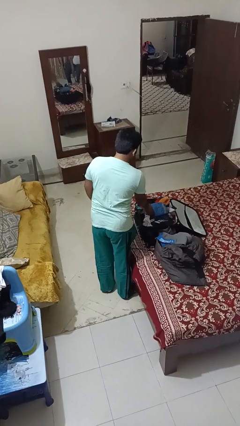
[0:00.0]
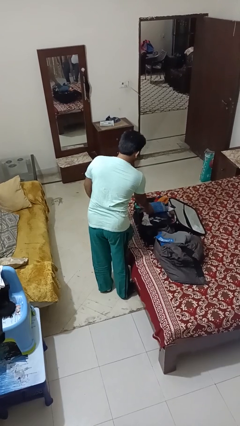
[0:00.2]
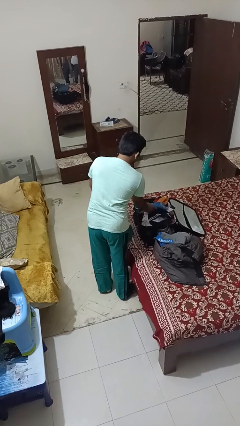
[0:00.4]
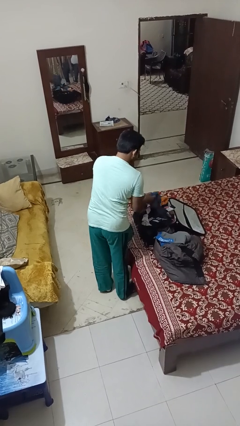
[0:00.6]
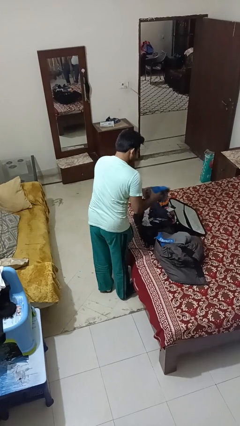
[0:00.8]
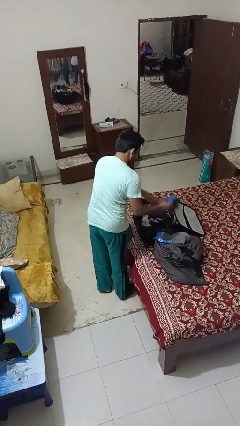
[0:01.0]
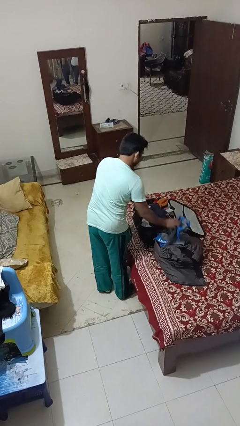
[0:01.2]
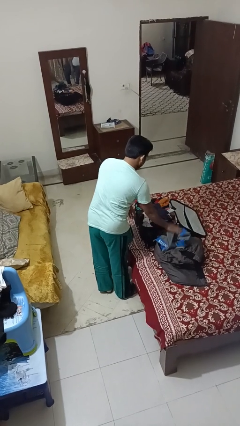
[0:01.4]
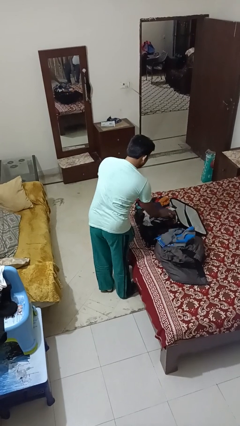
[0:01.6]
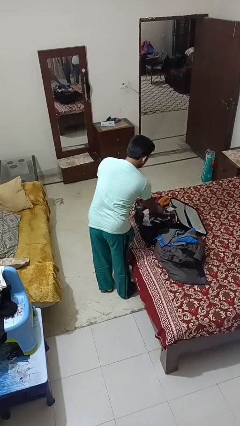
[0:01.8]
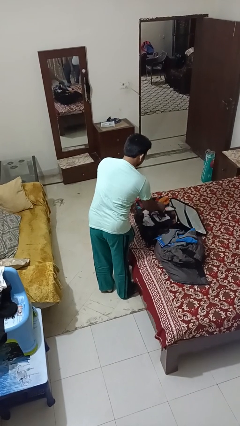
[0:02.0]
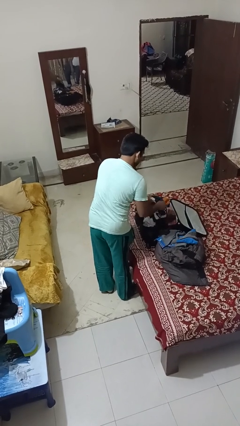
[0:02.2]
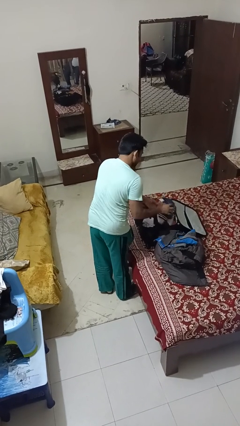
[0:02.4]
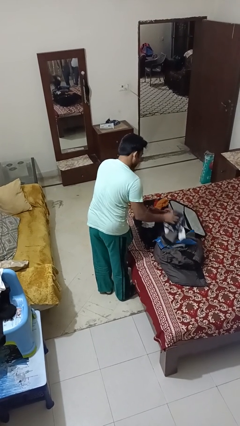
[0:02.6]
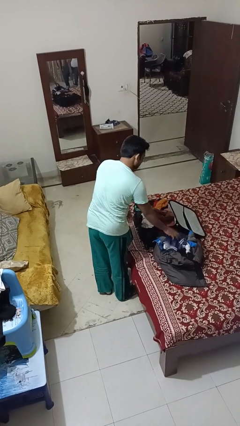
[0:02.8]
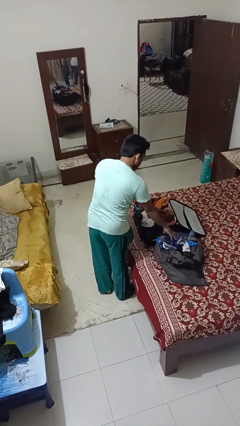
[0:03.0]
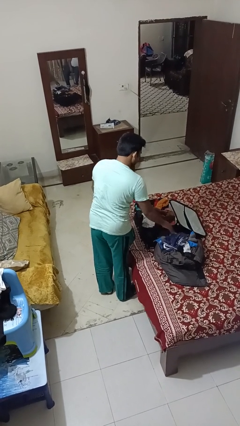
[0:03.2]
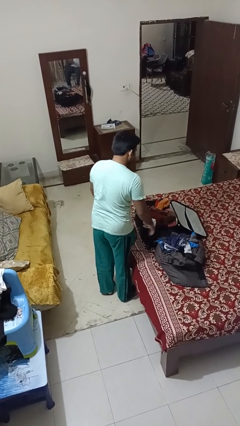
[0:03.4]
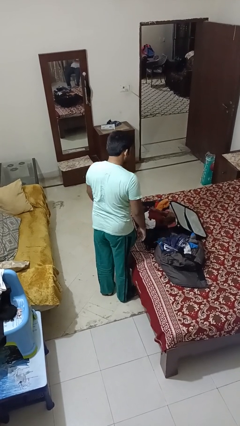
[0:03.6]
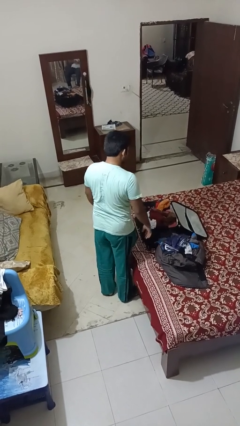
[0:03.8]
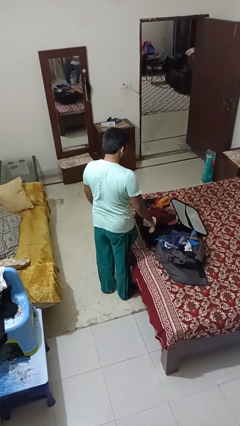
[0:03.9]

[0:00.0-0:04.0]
person unloads clothes from suitcase

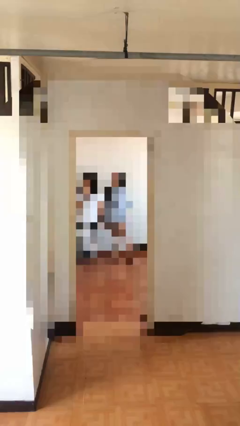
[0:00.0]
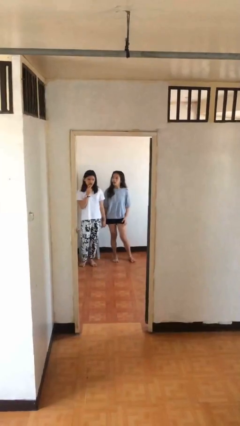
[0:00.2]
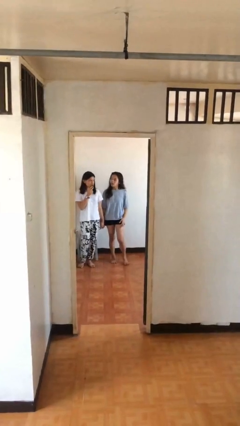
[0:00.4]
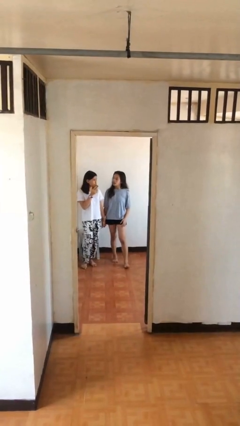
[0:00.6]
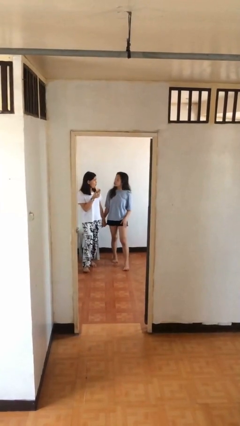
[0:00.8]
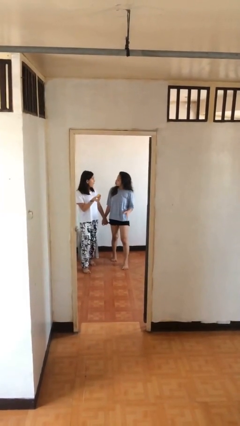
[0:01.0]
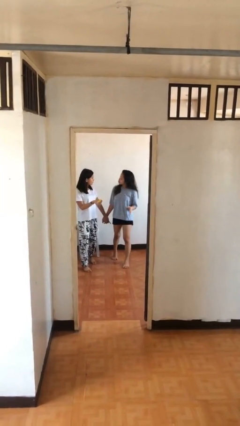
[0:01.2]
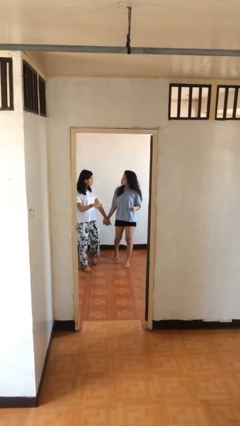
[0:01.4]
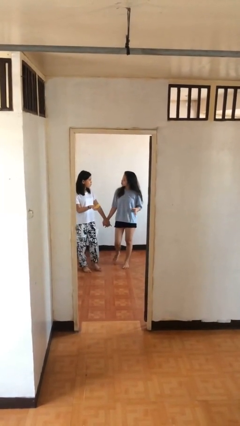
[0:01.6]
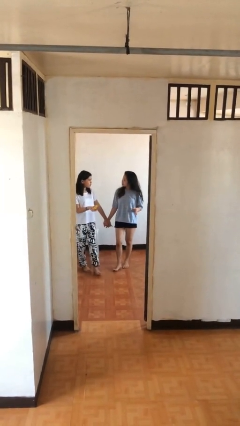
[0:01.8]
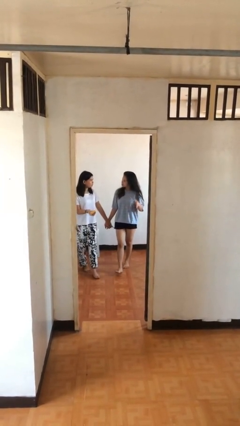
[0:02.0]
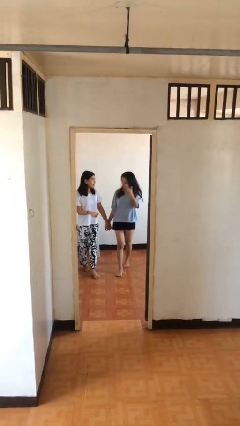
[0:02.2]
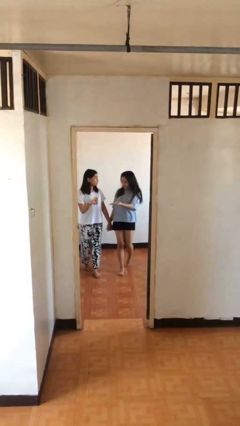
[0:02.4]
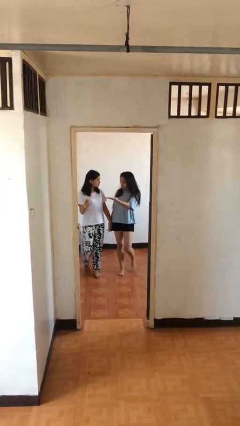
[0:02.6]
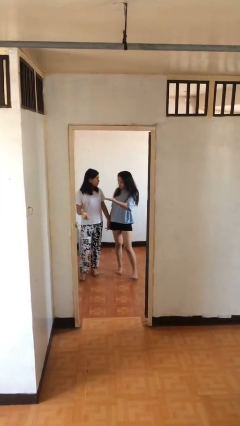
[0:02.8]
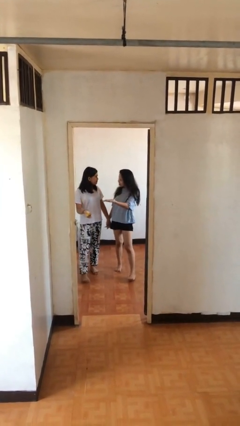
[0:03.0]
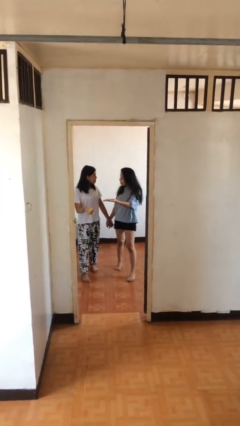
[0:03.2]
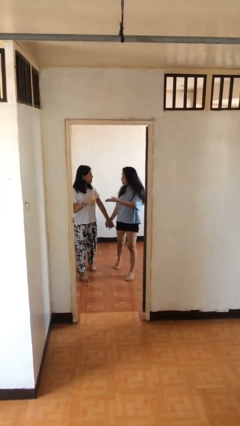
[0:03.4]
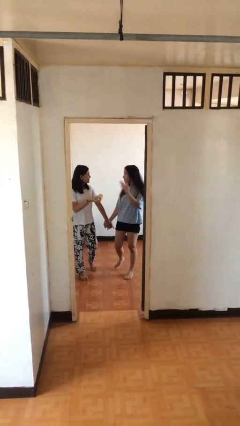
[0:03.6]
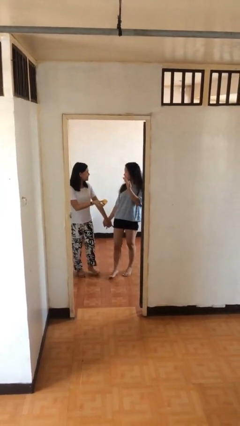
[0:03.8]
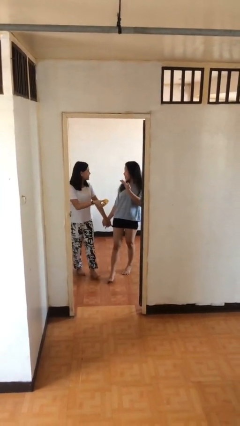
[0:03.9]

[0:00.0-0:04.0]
person holds hand

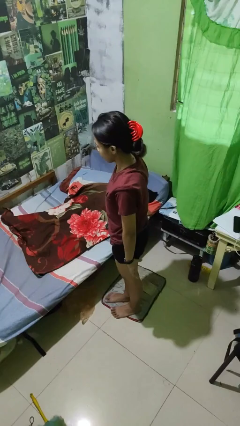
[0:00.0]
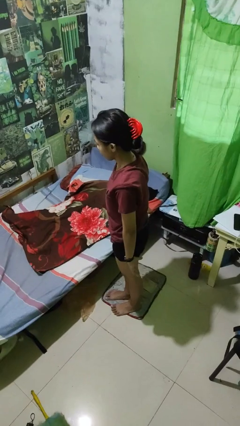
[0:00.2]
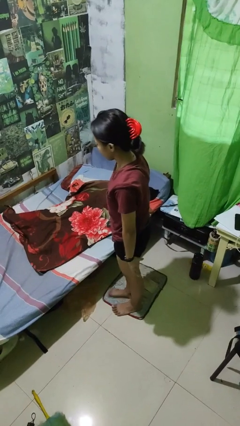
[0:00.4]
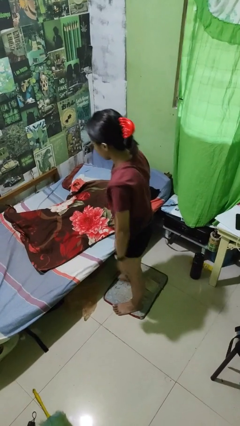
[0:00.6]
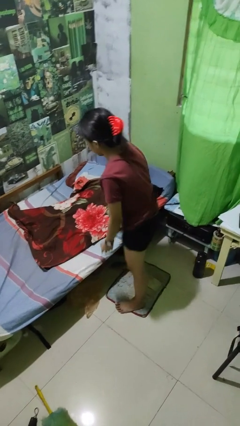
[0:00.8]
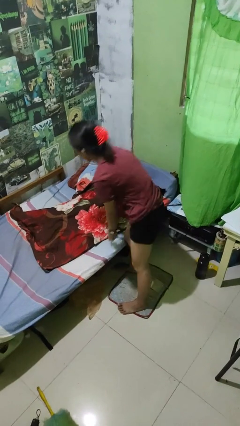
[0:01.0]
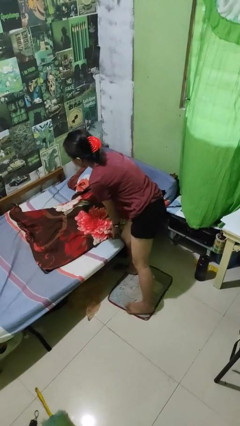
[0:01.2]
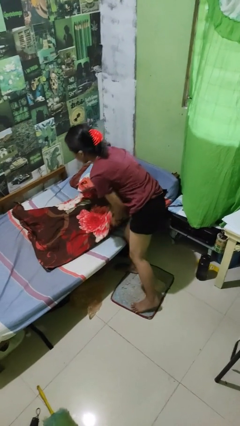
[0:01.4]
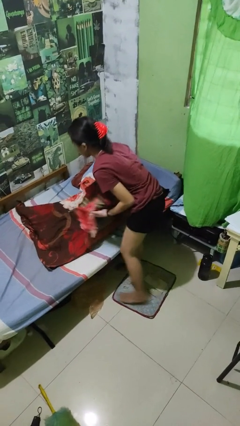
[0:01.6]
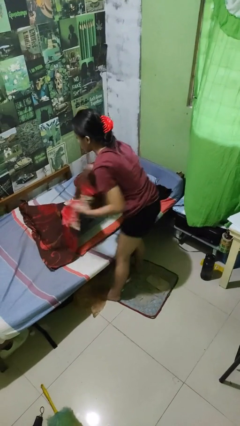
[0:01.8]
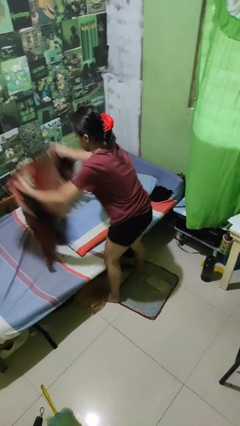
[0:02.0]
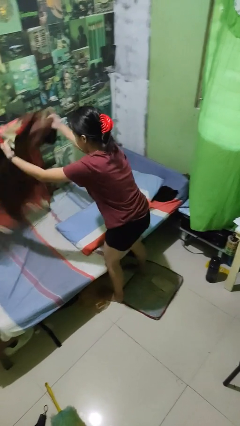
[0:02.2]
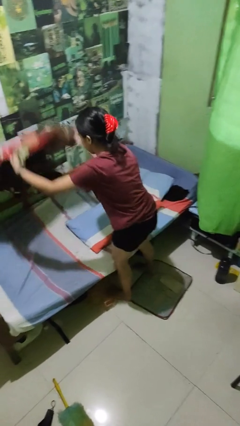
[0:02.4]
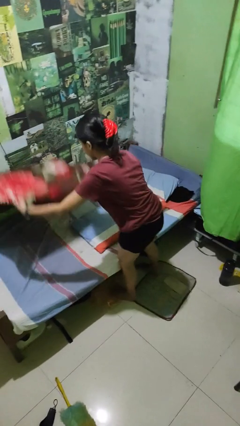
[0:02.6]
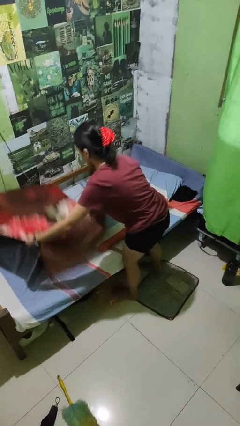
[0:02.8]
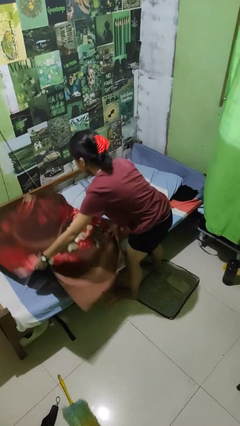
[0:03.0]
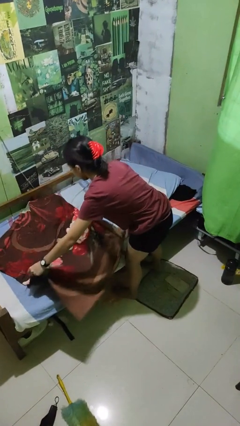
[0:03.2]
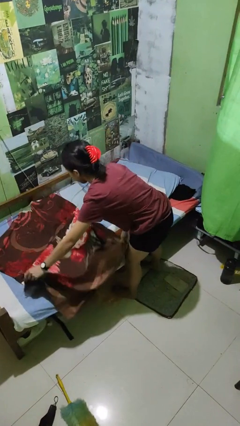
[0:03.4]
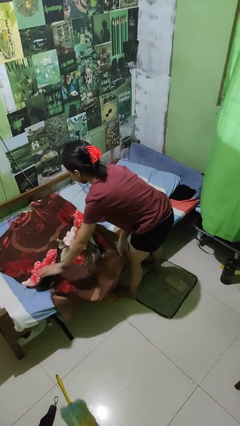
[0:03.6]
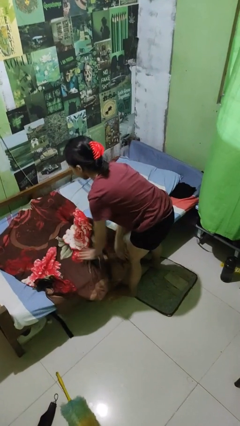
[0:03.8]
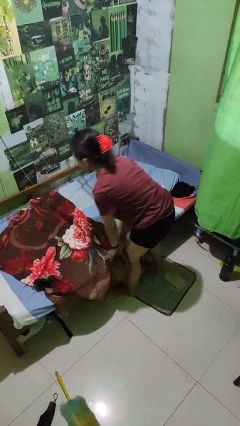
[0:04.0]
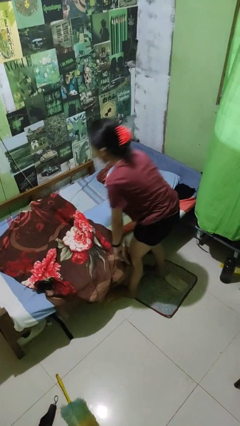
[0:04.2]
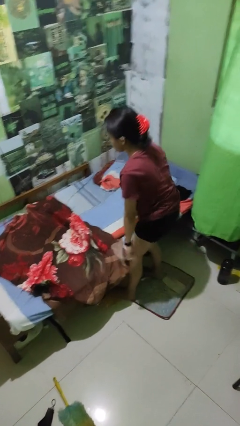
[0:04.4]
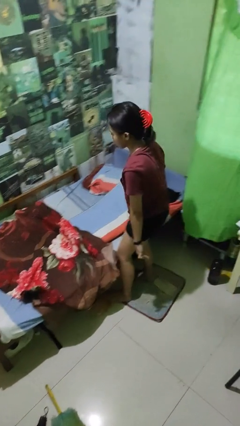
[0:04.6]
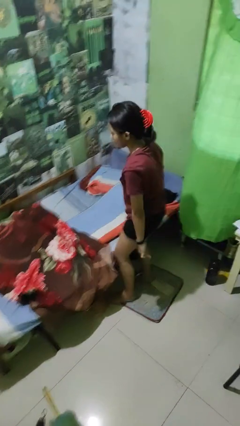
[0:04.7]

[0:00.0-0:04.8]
person makes bed

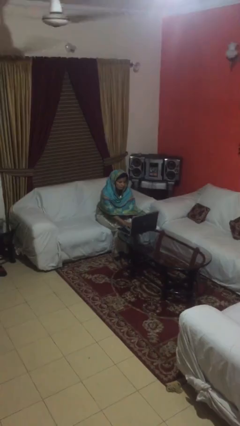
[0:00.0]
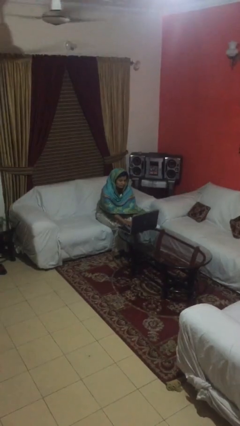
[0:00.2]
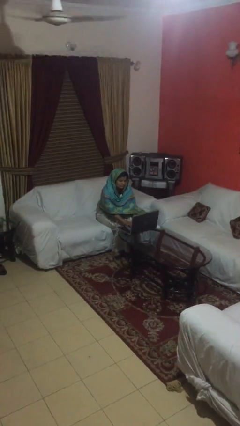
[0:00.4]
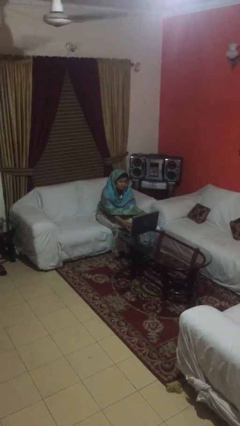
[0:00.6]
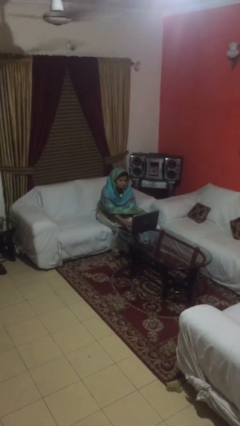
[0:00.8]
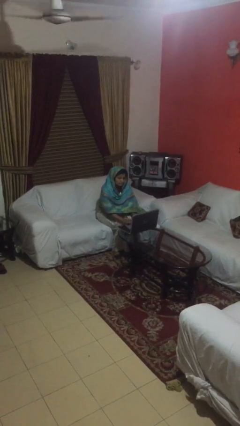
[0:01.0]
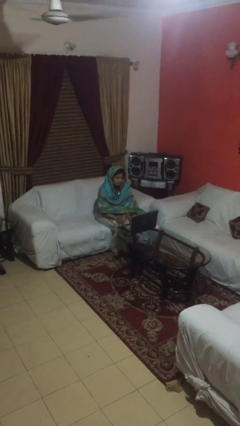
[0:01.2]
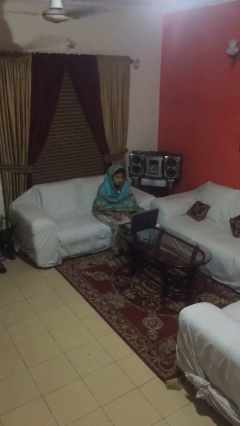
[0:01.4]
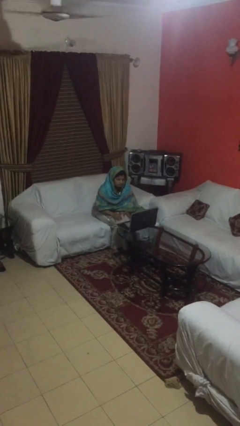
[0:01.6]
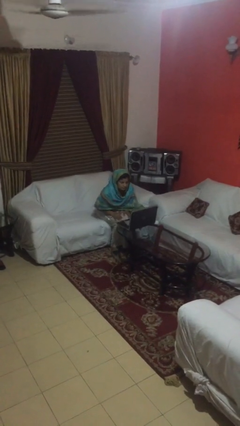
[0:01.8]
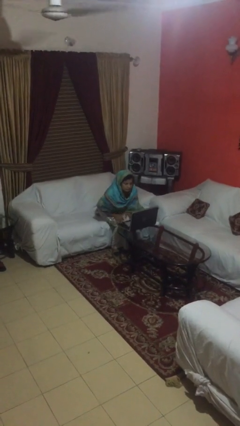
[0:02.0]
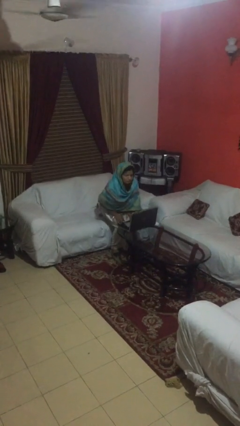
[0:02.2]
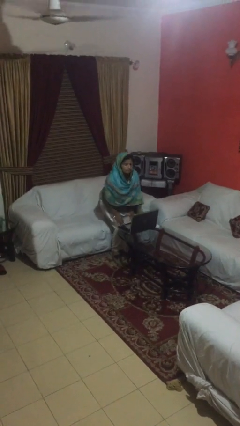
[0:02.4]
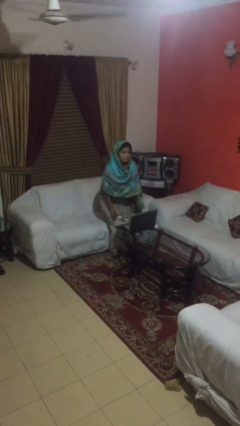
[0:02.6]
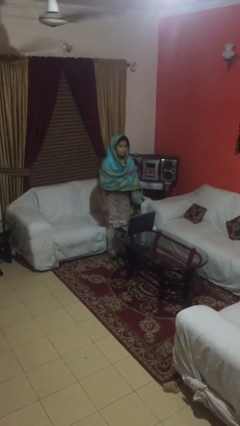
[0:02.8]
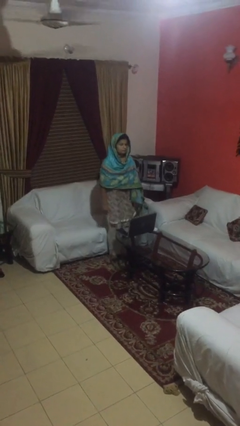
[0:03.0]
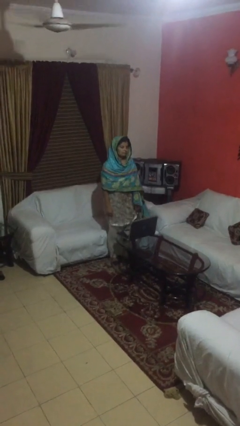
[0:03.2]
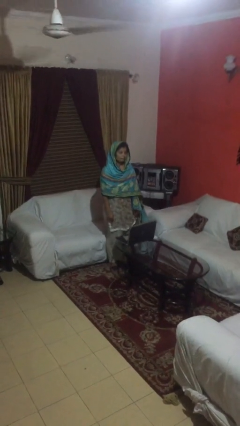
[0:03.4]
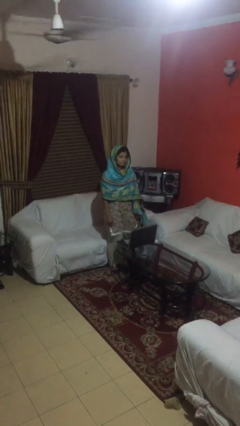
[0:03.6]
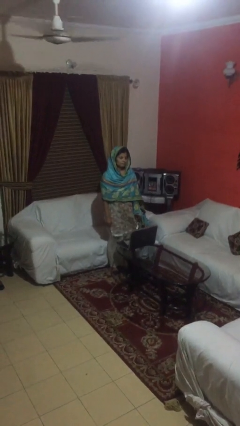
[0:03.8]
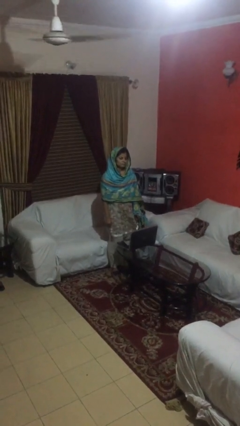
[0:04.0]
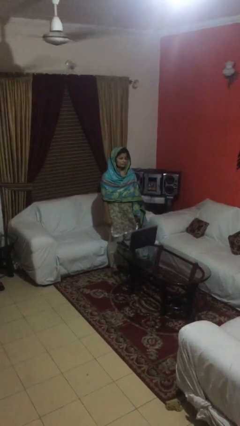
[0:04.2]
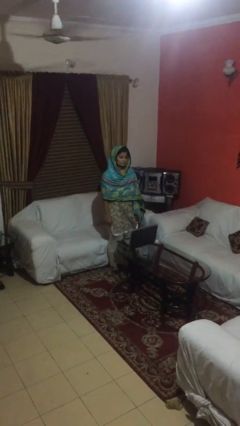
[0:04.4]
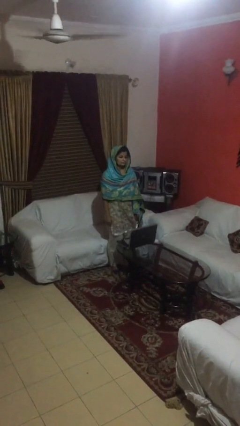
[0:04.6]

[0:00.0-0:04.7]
person stands up

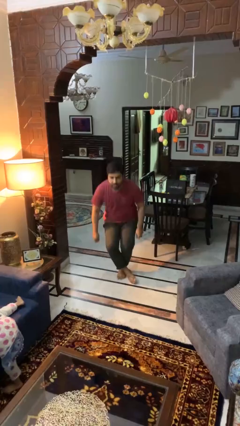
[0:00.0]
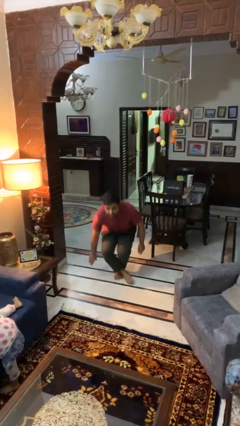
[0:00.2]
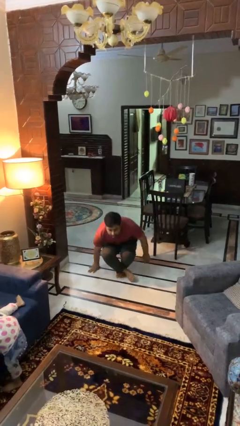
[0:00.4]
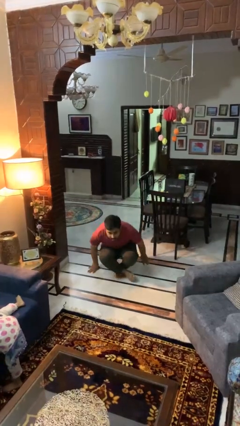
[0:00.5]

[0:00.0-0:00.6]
person sits crisscross
